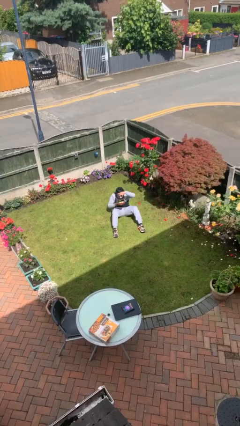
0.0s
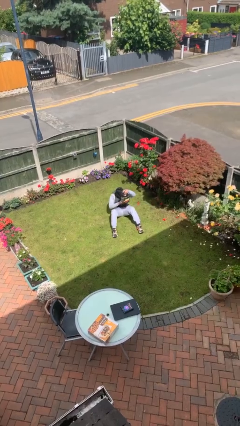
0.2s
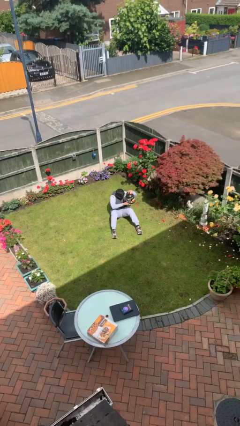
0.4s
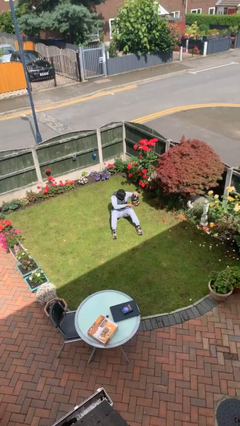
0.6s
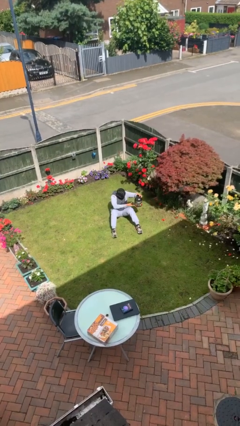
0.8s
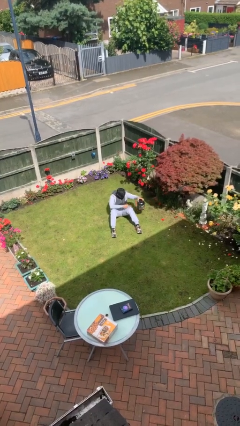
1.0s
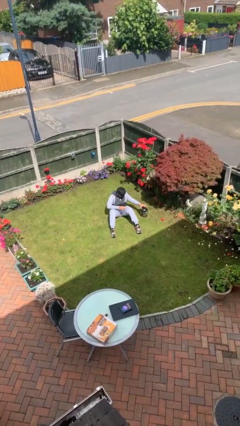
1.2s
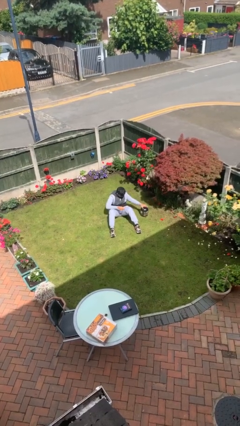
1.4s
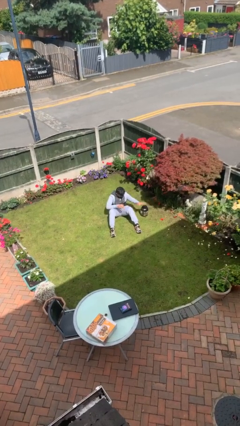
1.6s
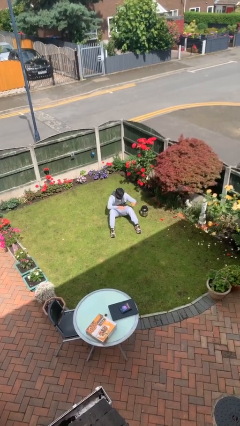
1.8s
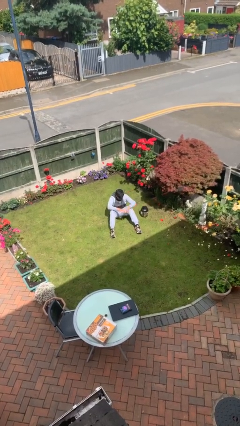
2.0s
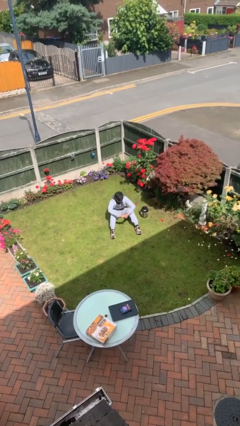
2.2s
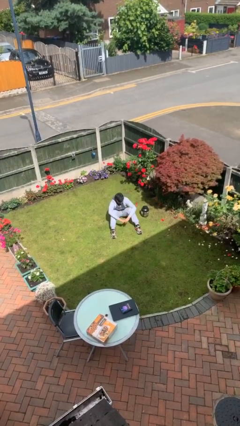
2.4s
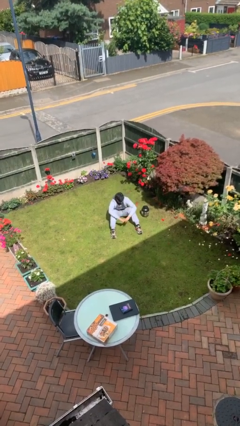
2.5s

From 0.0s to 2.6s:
person puts down object on floor

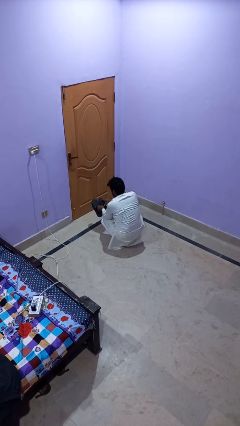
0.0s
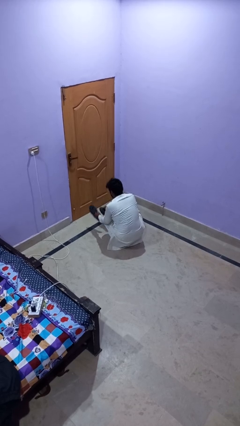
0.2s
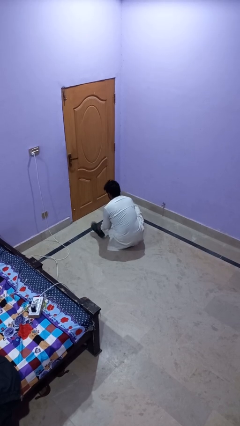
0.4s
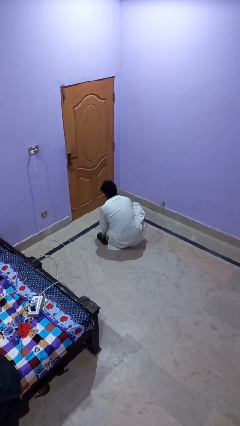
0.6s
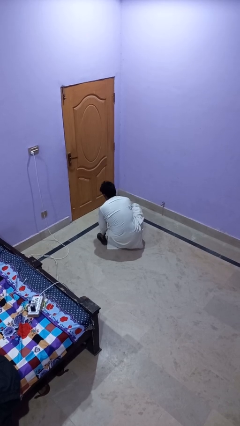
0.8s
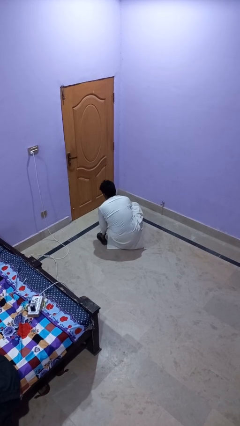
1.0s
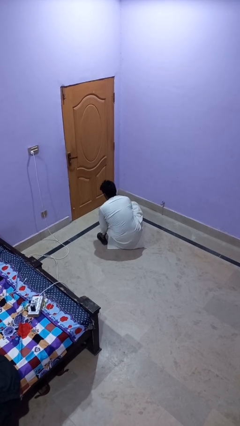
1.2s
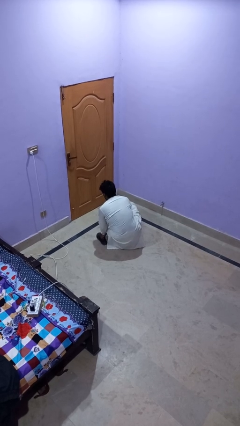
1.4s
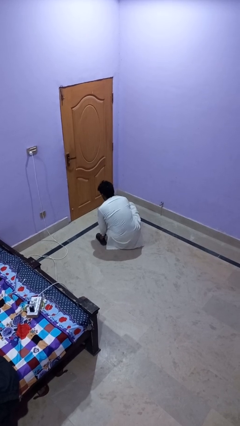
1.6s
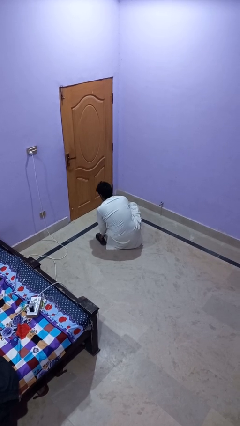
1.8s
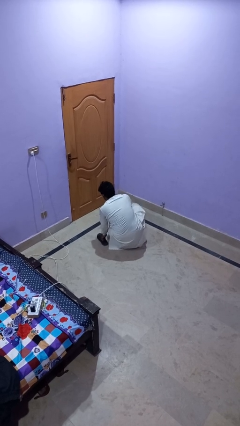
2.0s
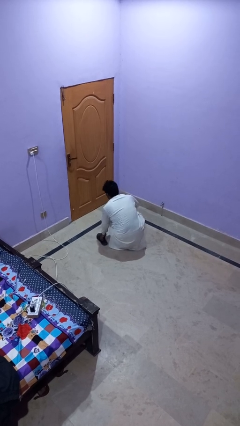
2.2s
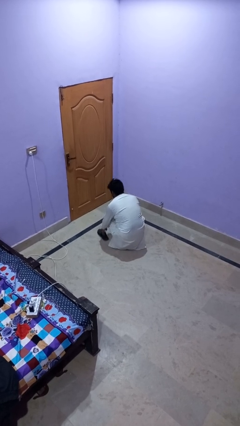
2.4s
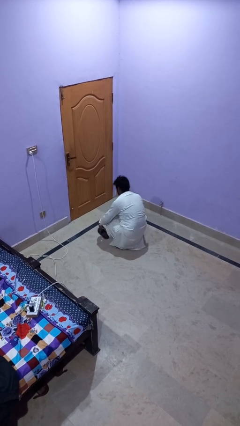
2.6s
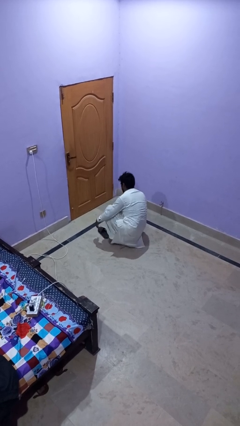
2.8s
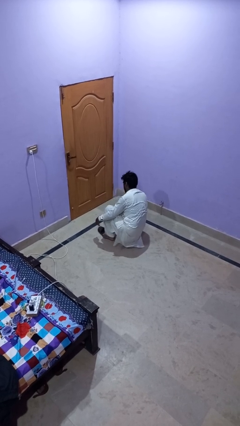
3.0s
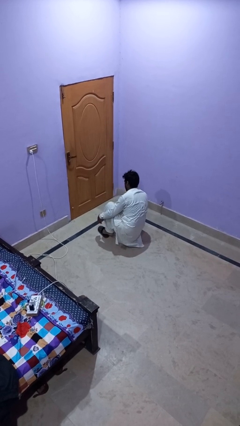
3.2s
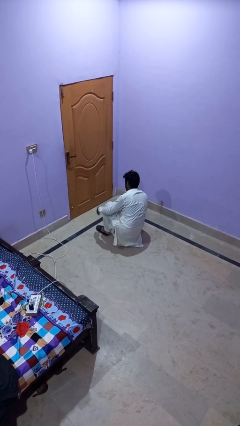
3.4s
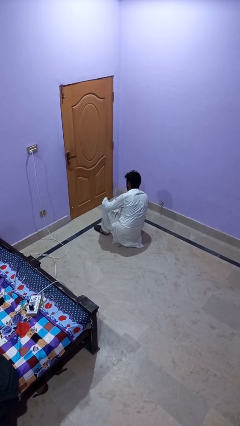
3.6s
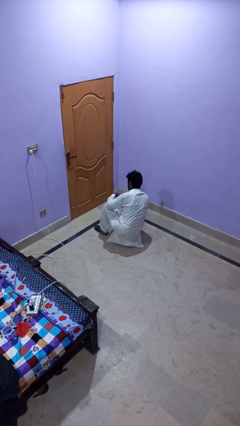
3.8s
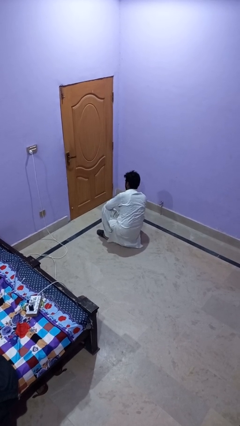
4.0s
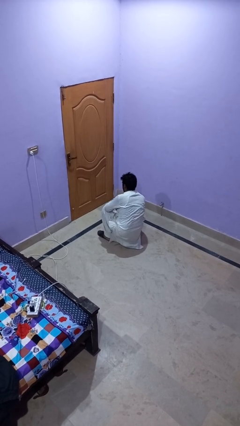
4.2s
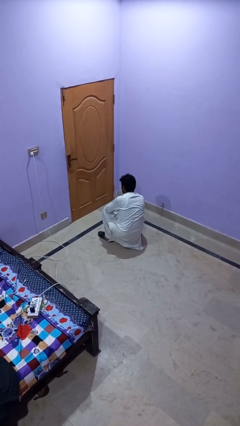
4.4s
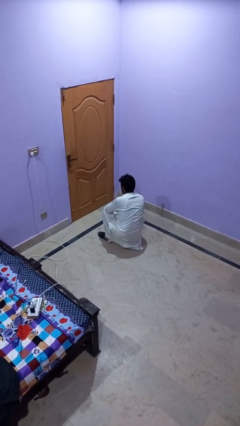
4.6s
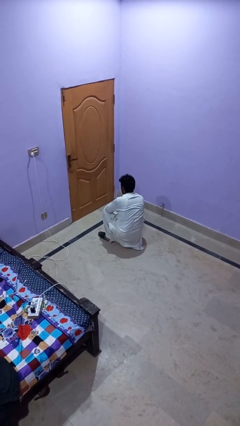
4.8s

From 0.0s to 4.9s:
person puts on shoes

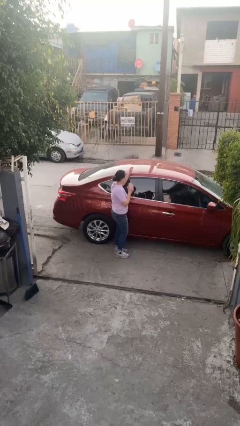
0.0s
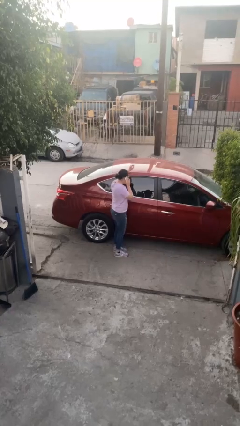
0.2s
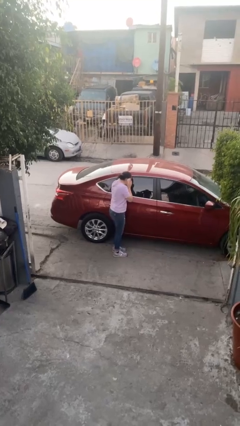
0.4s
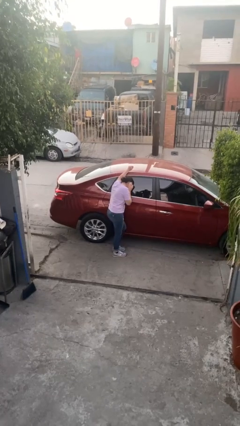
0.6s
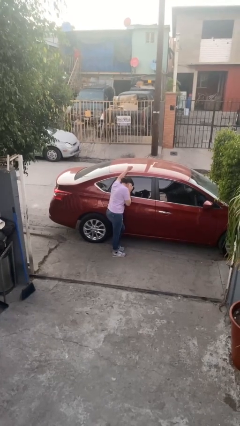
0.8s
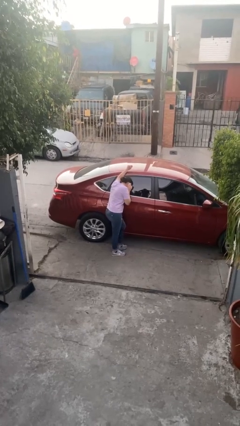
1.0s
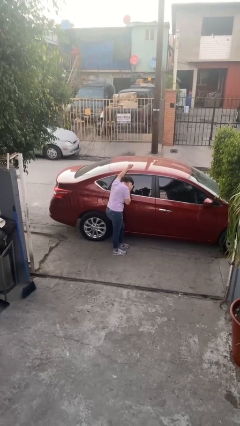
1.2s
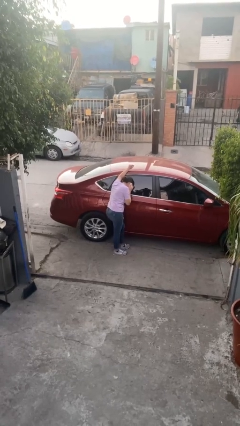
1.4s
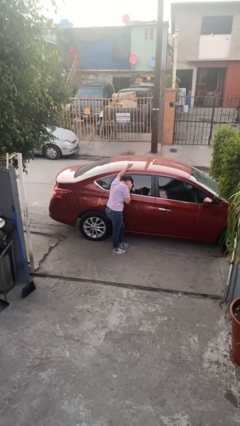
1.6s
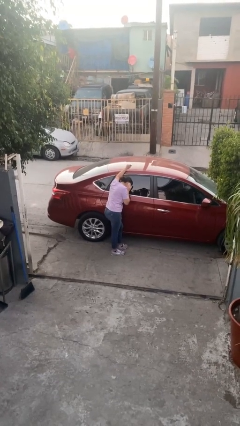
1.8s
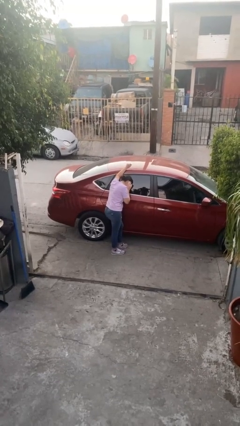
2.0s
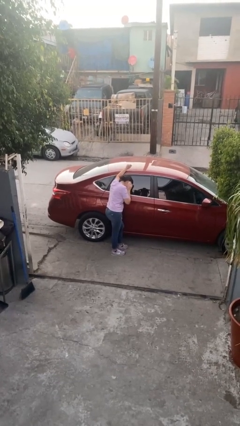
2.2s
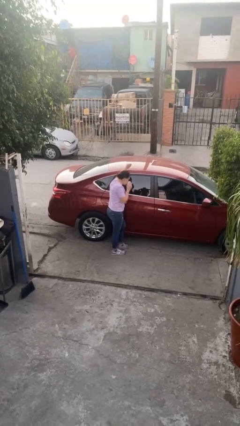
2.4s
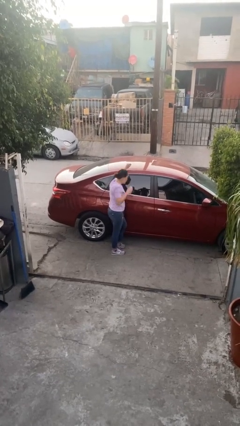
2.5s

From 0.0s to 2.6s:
person leans against car

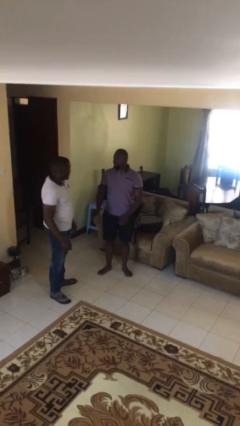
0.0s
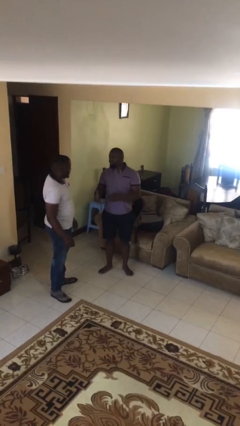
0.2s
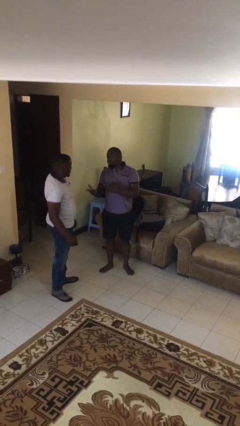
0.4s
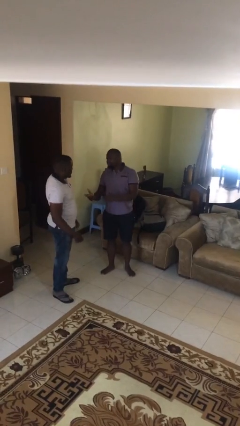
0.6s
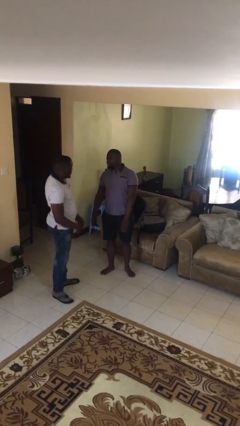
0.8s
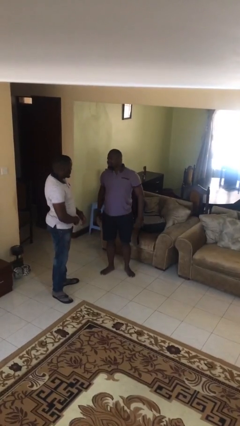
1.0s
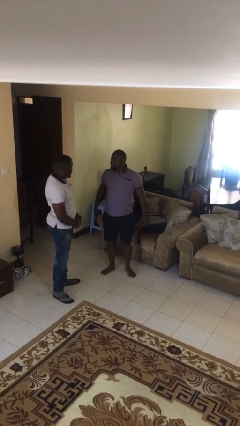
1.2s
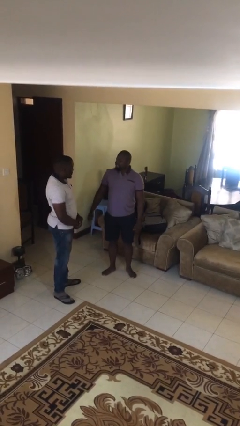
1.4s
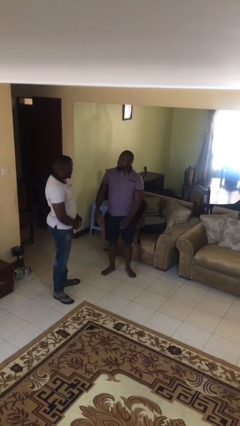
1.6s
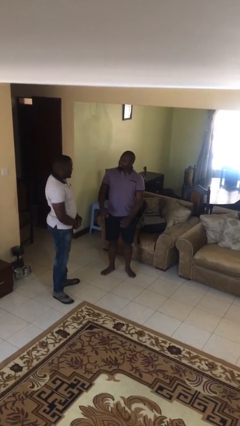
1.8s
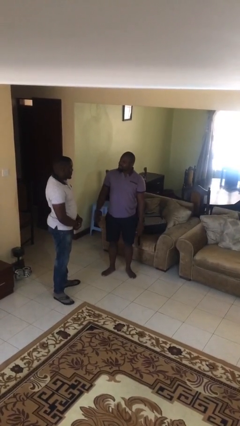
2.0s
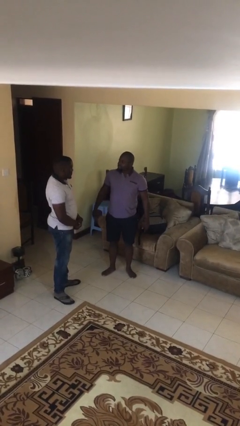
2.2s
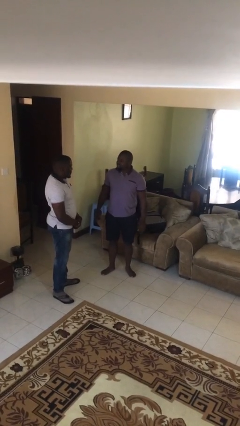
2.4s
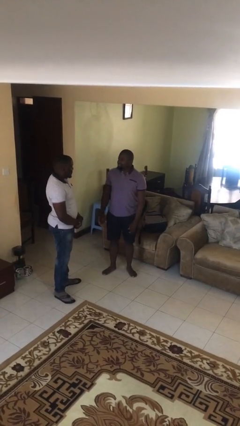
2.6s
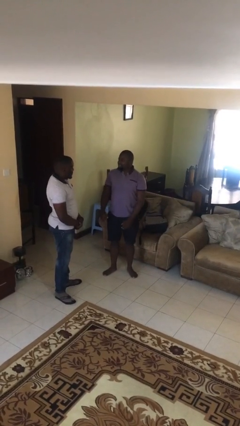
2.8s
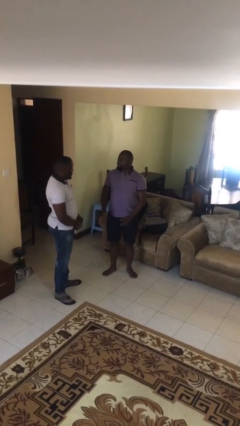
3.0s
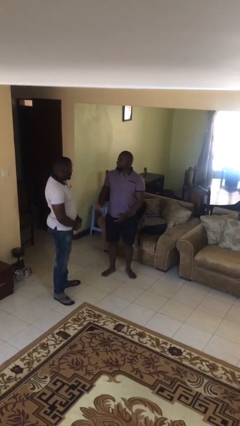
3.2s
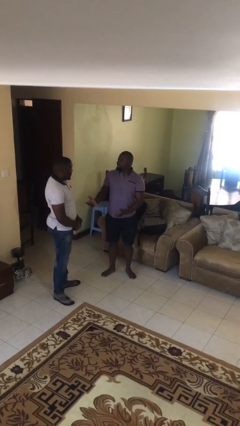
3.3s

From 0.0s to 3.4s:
person talks to person

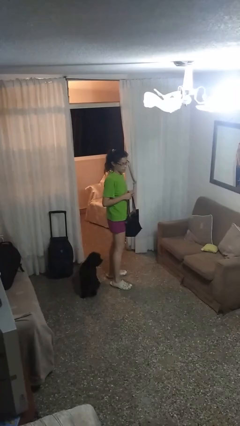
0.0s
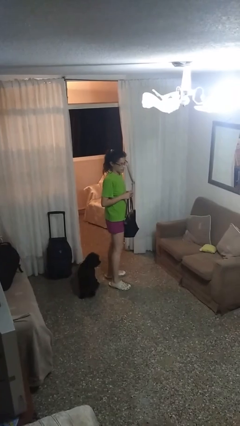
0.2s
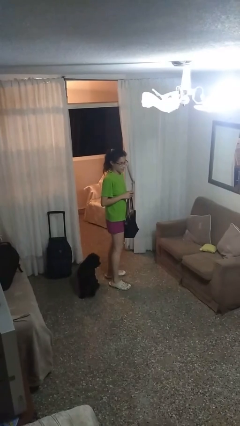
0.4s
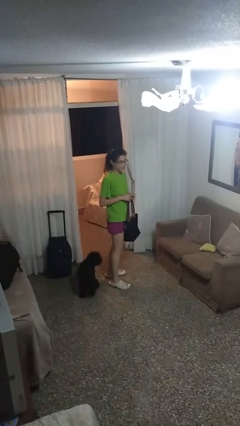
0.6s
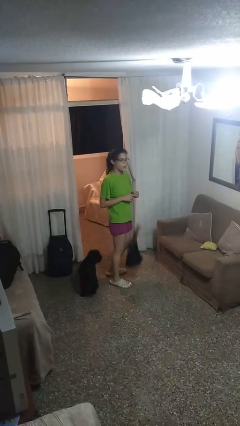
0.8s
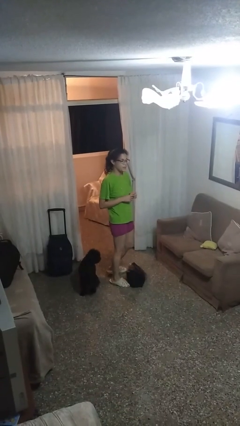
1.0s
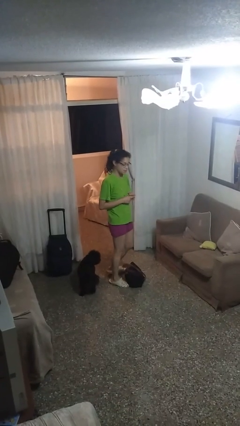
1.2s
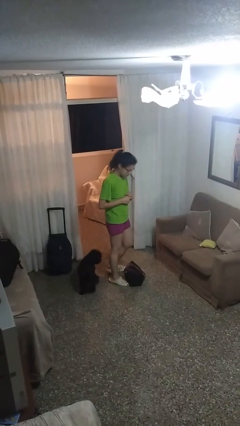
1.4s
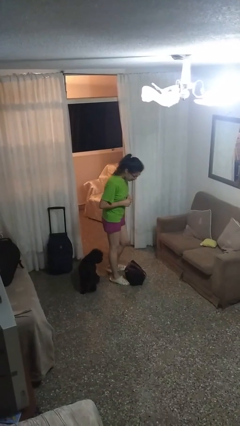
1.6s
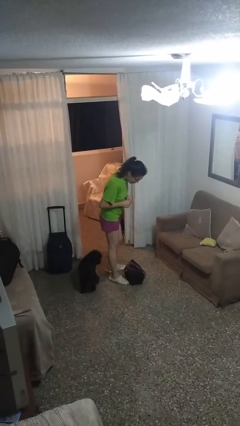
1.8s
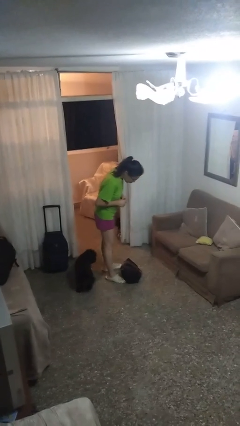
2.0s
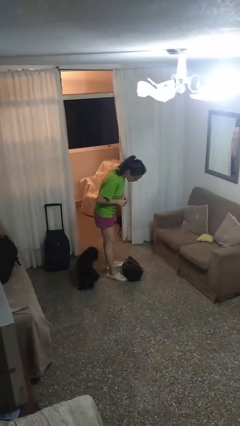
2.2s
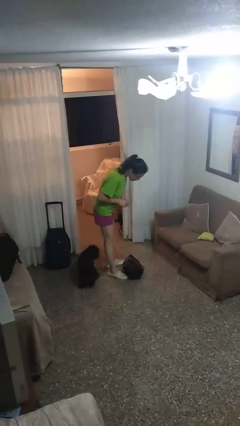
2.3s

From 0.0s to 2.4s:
person drops object

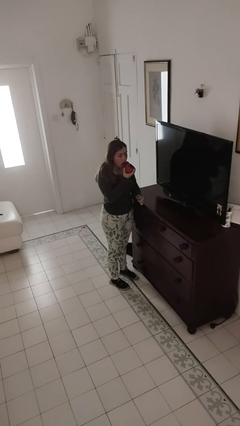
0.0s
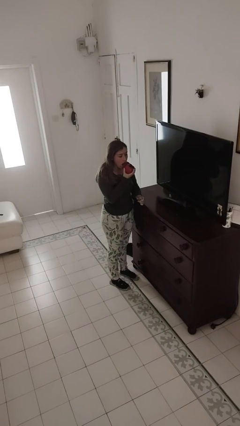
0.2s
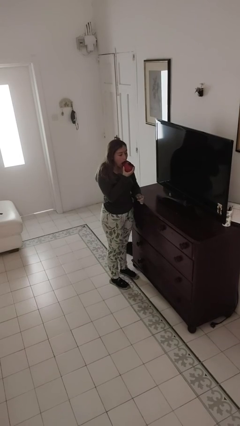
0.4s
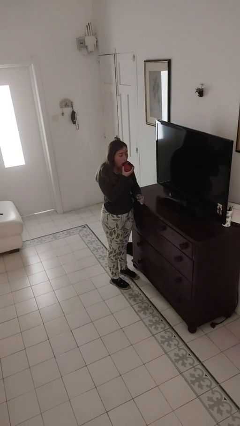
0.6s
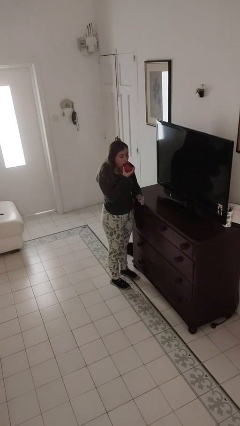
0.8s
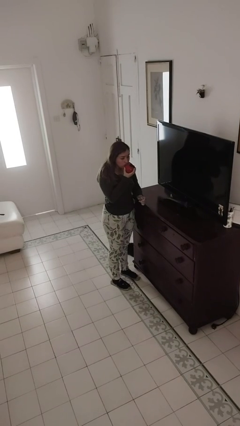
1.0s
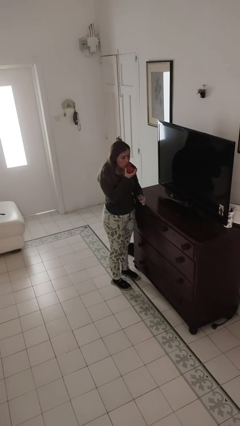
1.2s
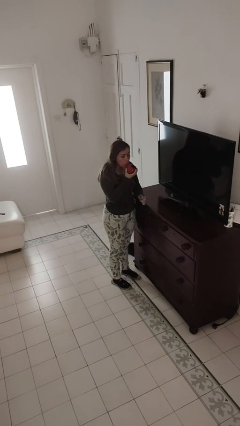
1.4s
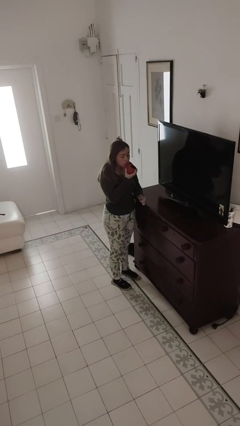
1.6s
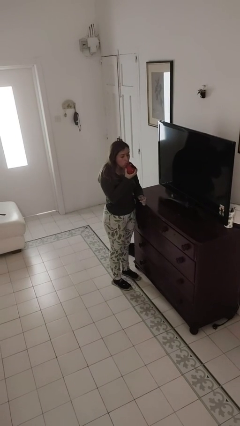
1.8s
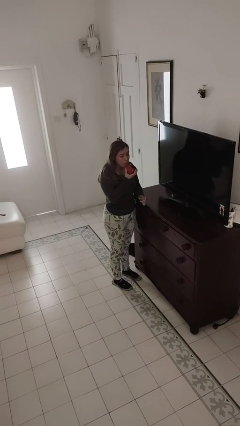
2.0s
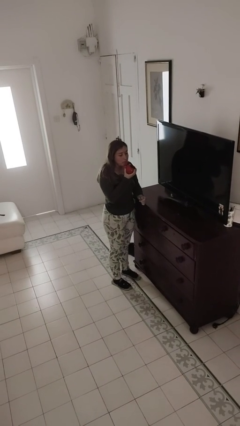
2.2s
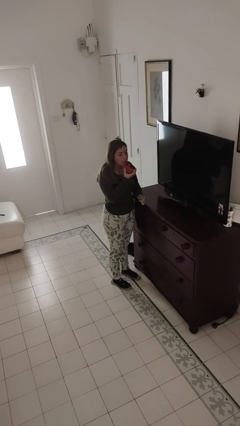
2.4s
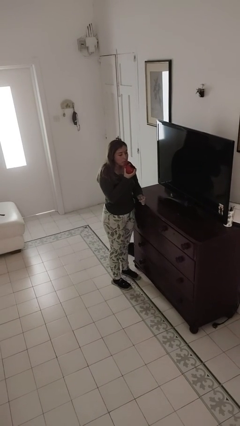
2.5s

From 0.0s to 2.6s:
person eats apple
